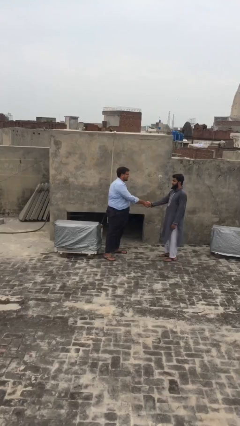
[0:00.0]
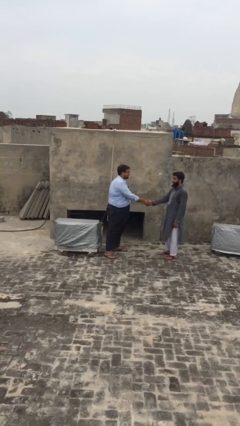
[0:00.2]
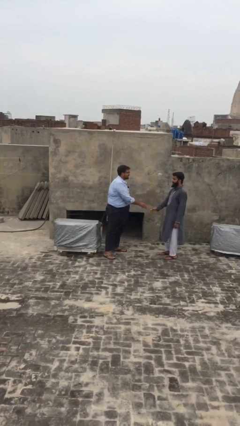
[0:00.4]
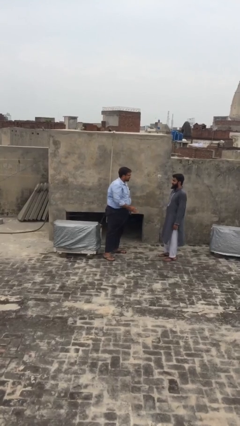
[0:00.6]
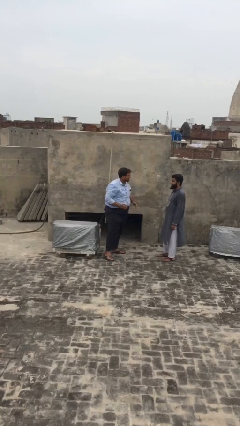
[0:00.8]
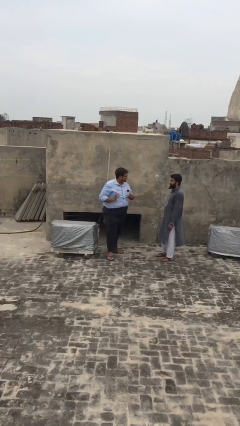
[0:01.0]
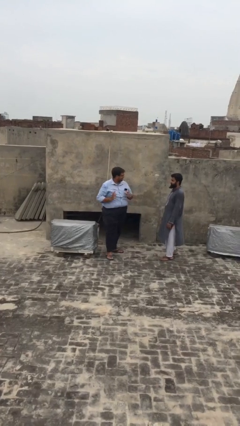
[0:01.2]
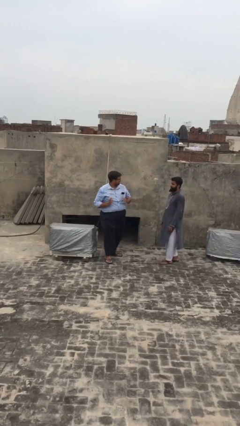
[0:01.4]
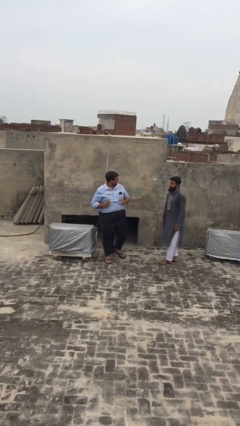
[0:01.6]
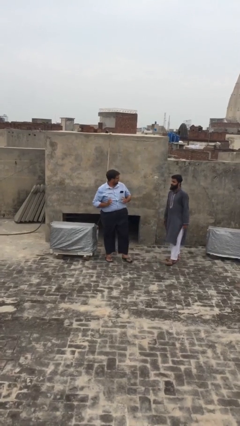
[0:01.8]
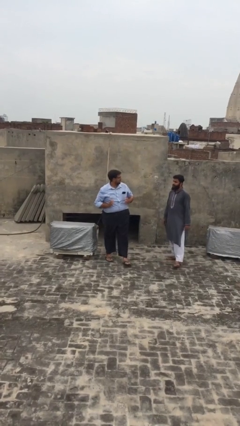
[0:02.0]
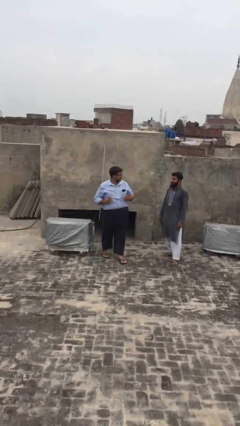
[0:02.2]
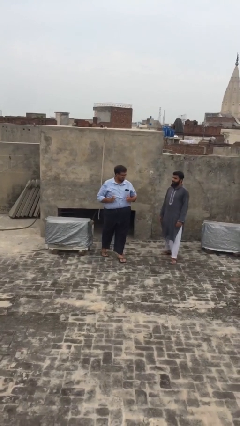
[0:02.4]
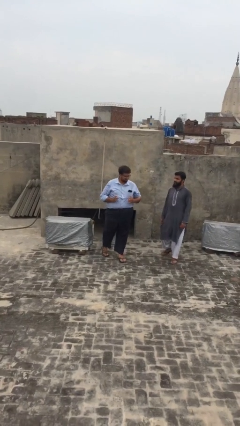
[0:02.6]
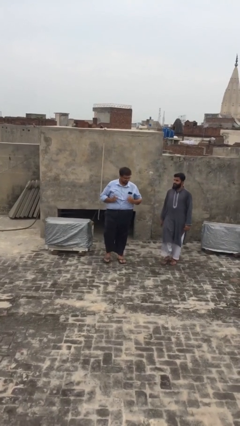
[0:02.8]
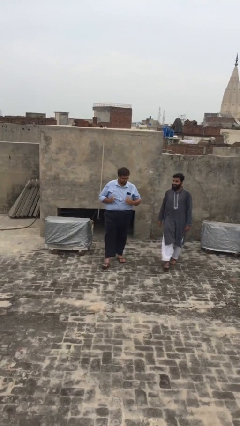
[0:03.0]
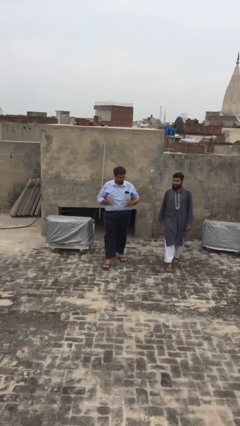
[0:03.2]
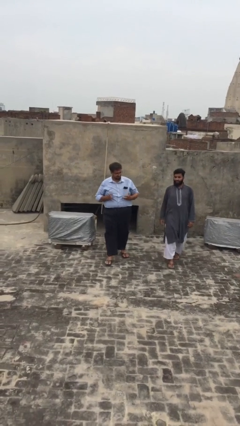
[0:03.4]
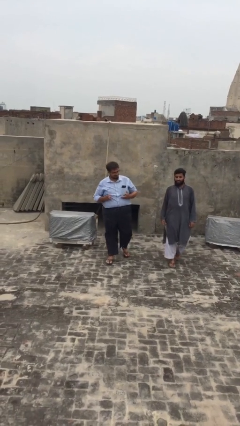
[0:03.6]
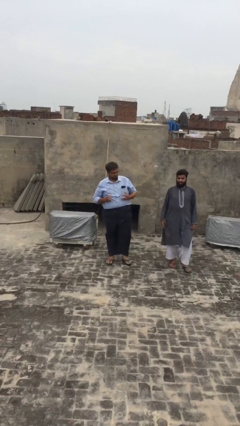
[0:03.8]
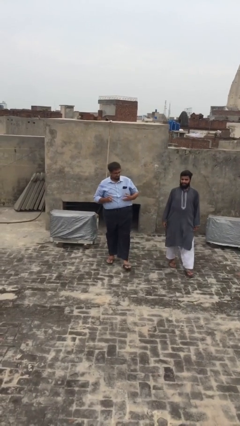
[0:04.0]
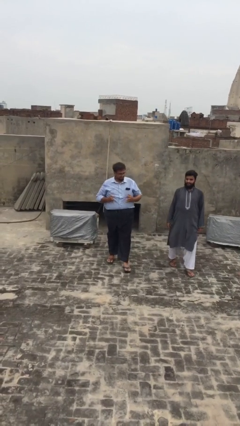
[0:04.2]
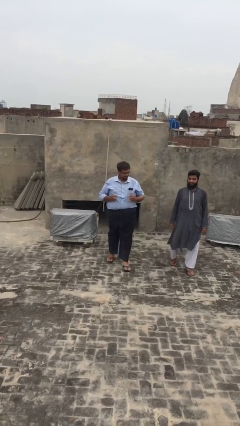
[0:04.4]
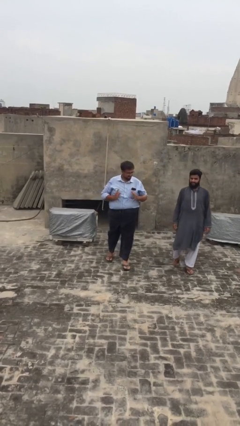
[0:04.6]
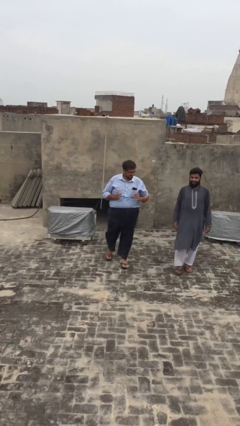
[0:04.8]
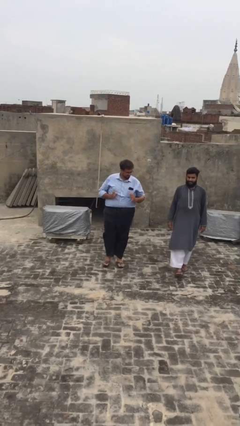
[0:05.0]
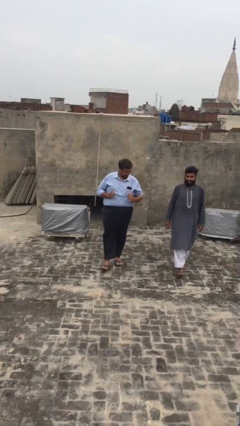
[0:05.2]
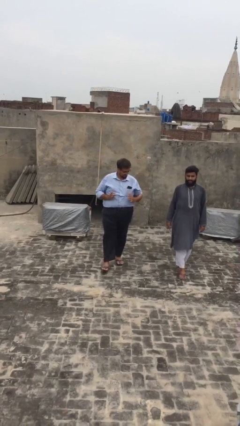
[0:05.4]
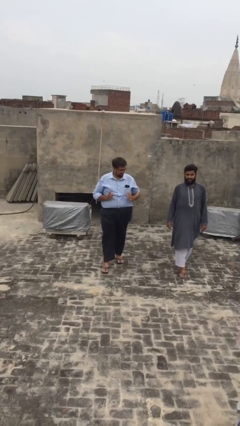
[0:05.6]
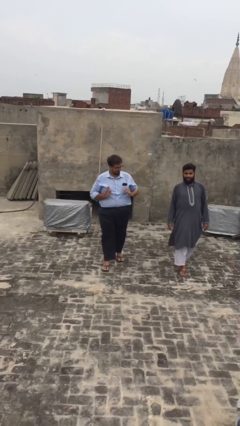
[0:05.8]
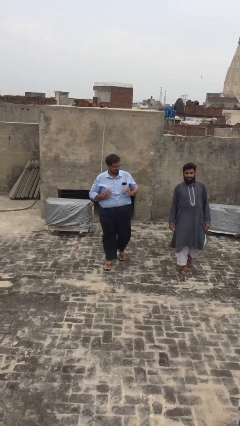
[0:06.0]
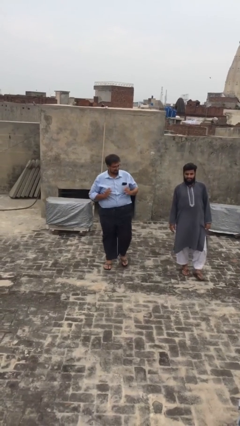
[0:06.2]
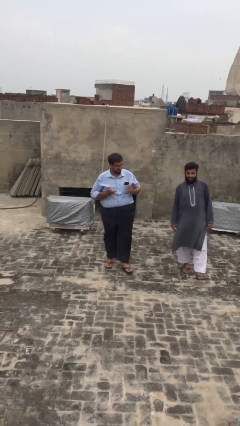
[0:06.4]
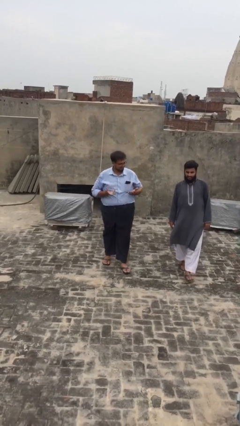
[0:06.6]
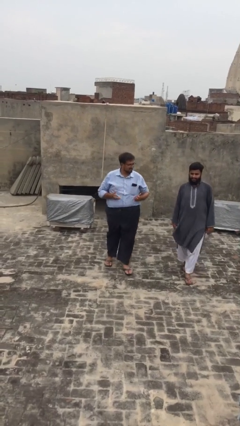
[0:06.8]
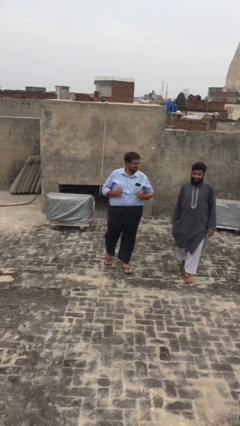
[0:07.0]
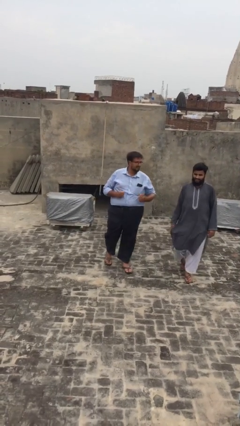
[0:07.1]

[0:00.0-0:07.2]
person talks to person

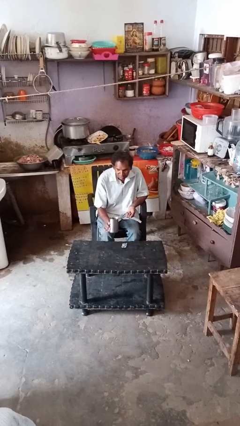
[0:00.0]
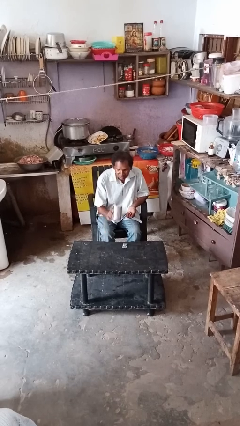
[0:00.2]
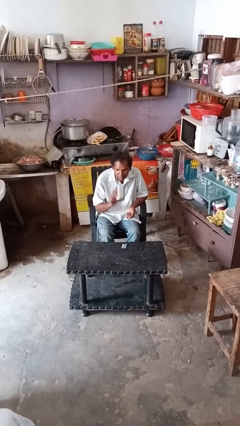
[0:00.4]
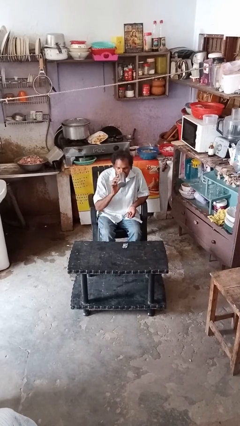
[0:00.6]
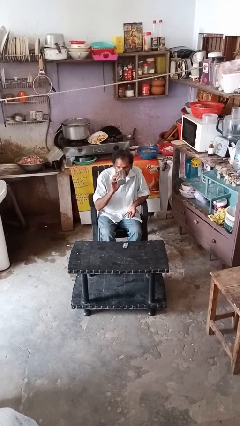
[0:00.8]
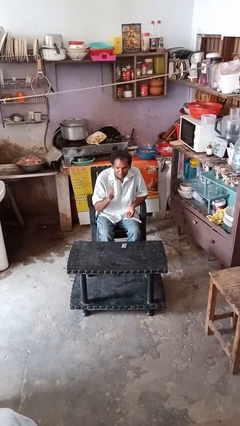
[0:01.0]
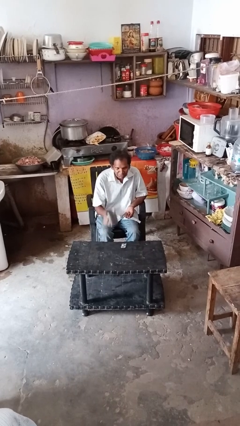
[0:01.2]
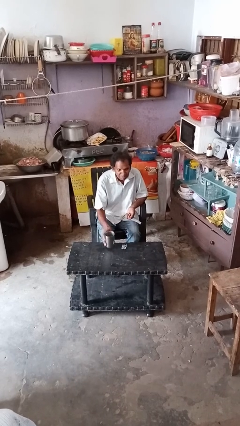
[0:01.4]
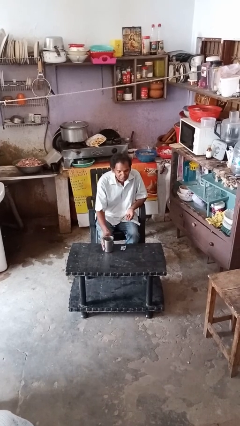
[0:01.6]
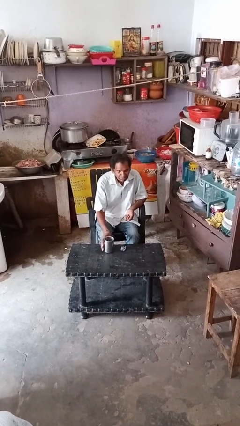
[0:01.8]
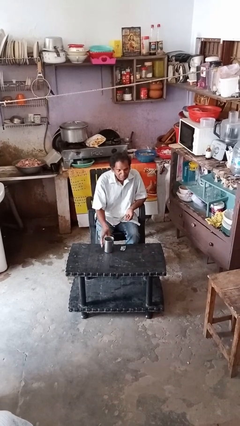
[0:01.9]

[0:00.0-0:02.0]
person drinks from cup

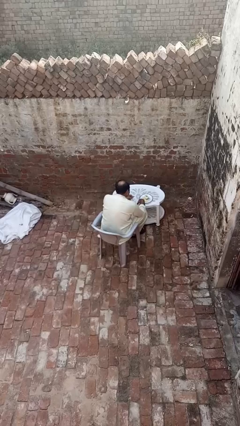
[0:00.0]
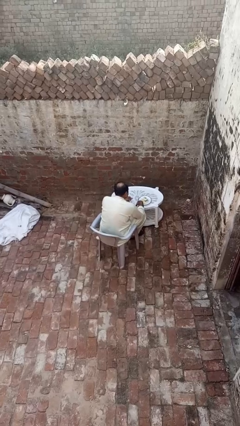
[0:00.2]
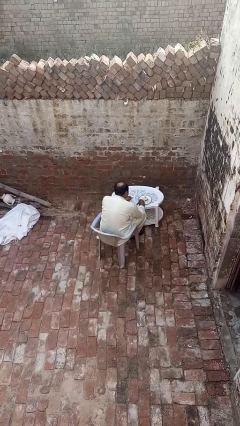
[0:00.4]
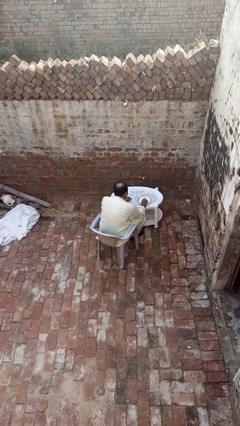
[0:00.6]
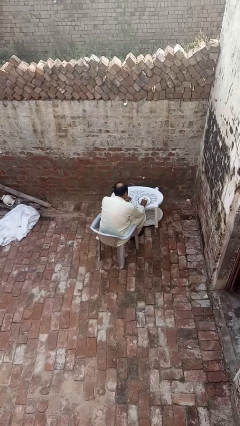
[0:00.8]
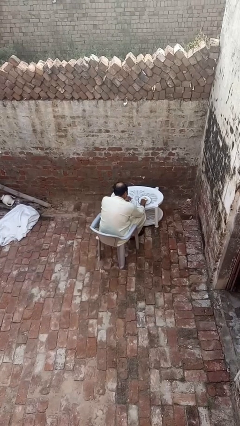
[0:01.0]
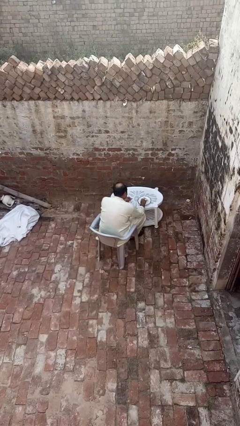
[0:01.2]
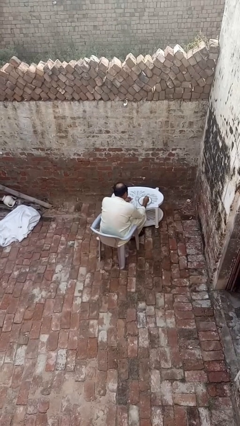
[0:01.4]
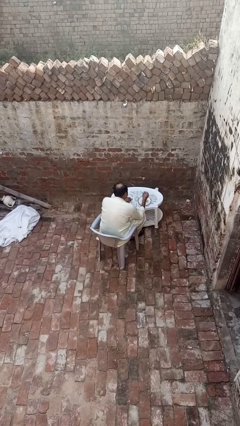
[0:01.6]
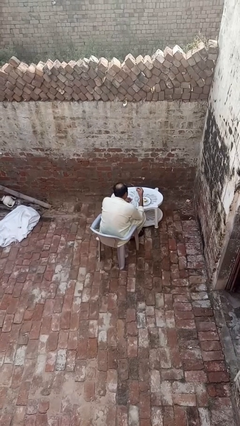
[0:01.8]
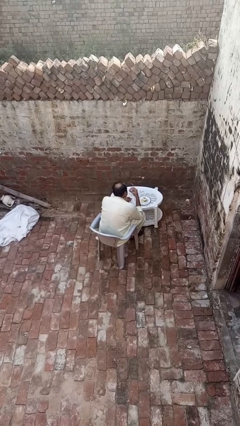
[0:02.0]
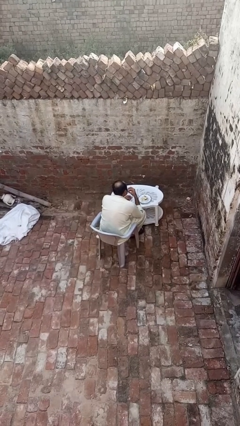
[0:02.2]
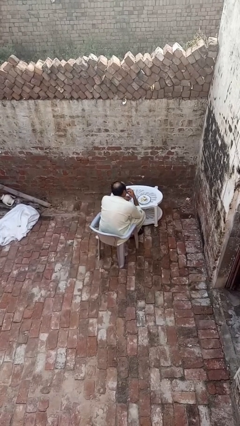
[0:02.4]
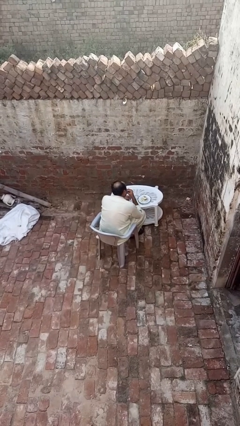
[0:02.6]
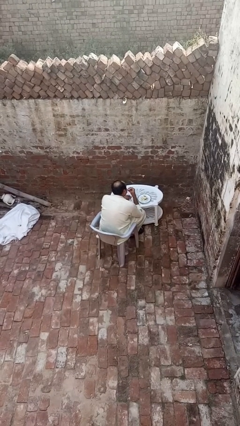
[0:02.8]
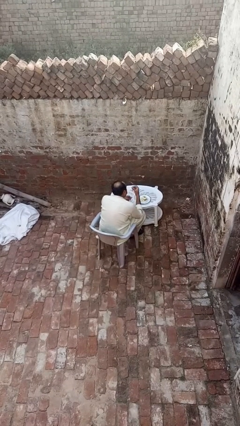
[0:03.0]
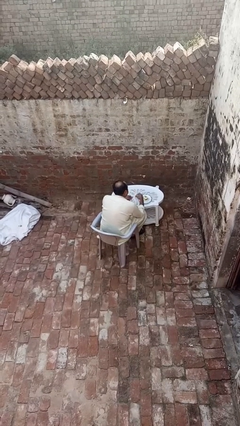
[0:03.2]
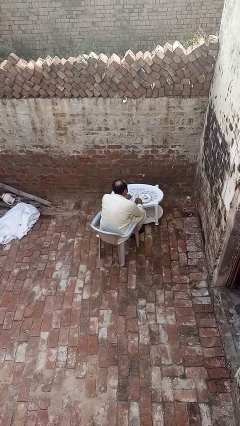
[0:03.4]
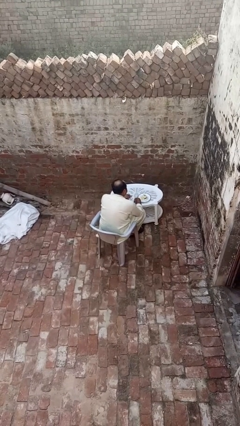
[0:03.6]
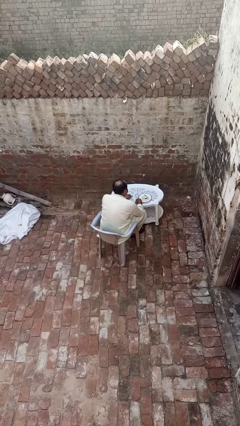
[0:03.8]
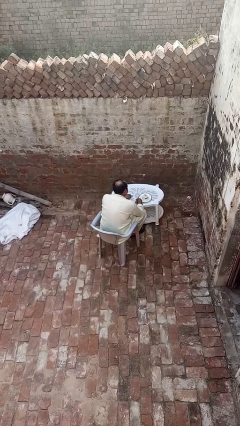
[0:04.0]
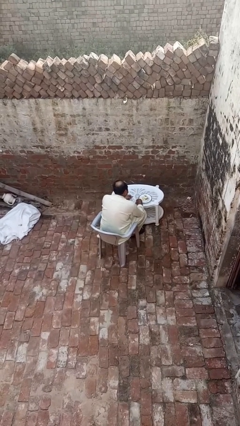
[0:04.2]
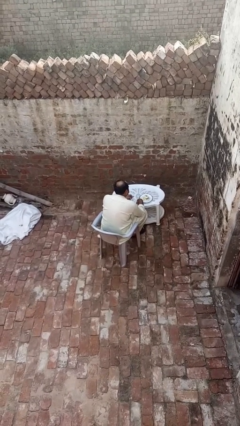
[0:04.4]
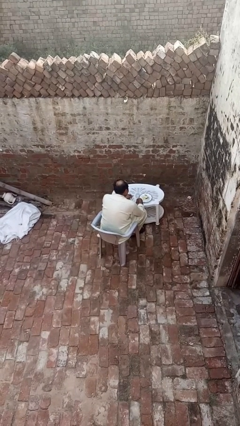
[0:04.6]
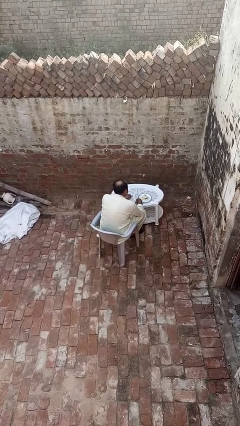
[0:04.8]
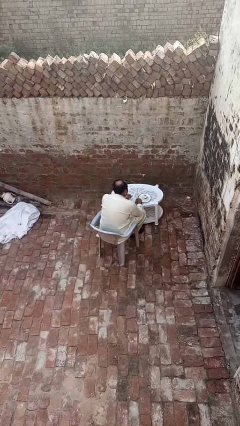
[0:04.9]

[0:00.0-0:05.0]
person eats with hands

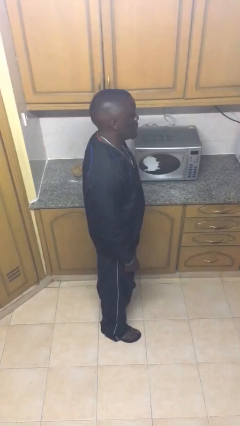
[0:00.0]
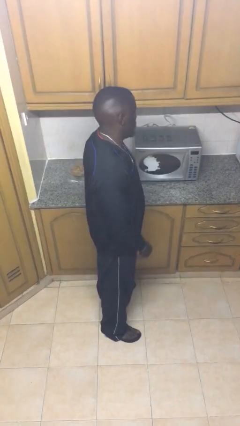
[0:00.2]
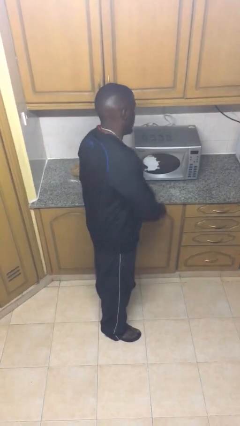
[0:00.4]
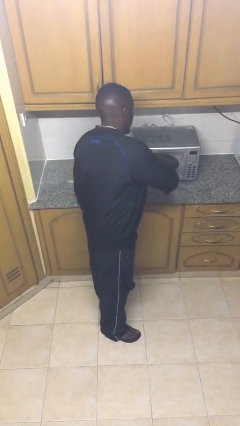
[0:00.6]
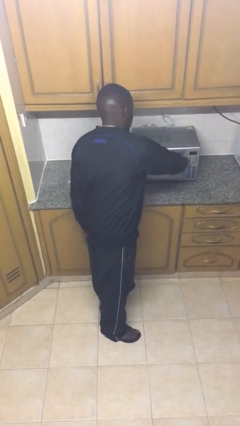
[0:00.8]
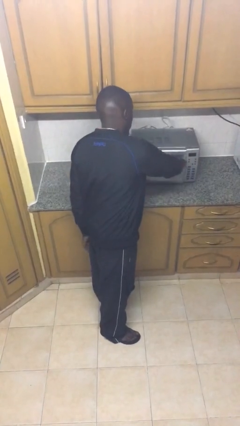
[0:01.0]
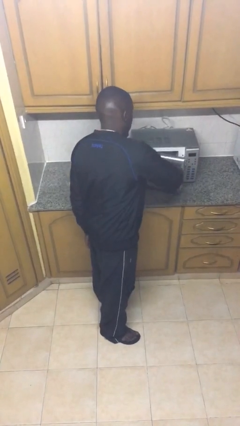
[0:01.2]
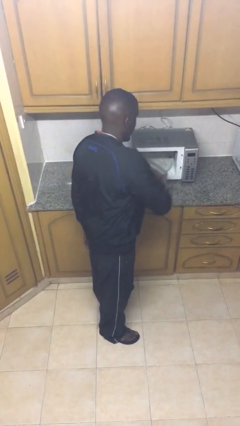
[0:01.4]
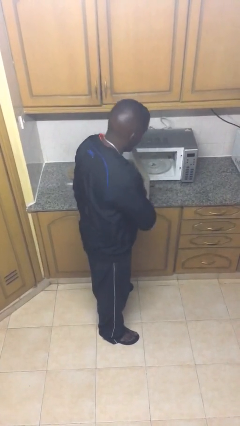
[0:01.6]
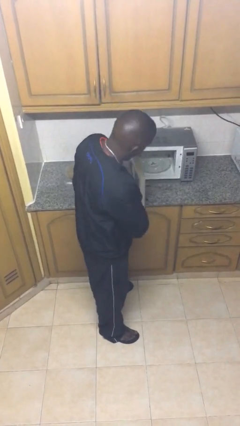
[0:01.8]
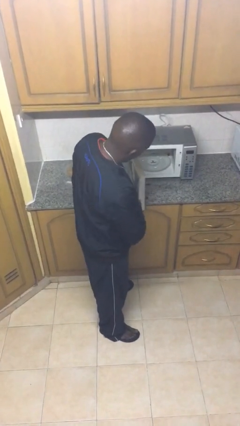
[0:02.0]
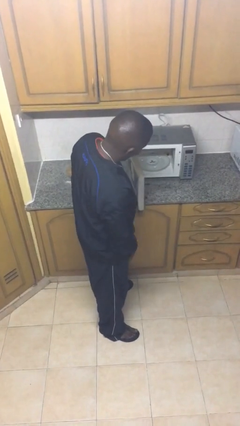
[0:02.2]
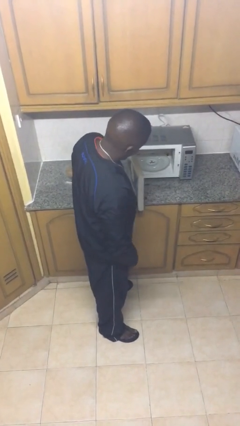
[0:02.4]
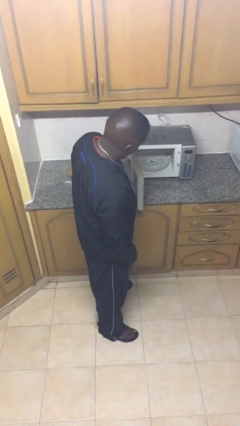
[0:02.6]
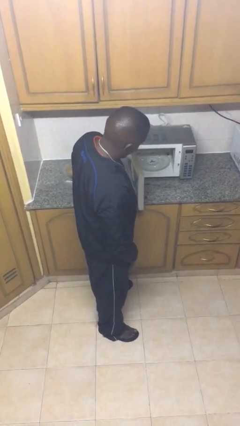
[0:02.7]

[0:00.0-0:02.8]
person opens microwave

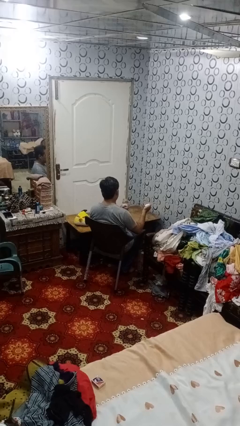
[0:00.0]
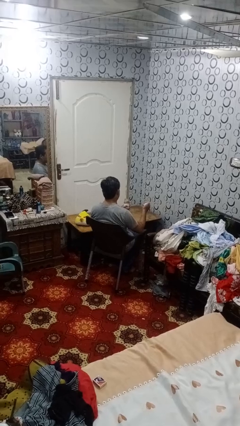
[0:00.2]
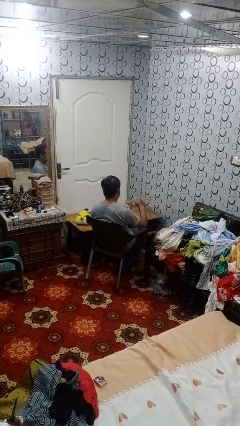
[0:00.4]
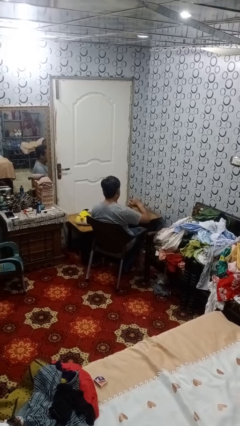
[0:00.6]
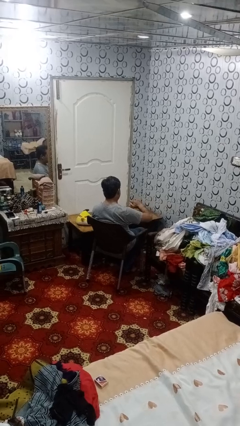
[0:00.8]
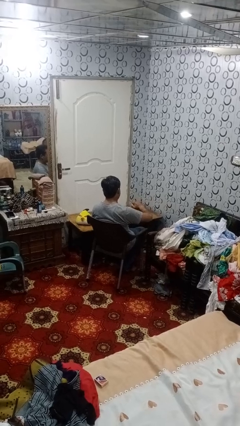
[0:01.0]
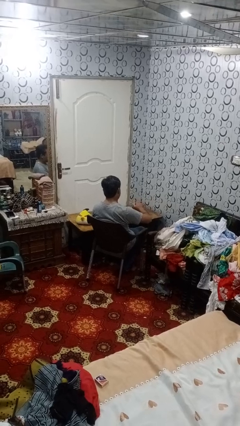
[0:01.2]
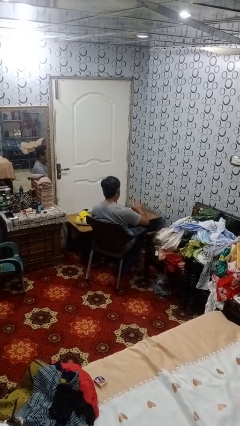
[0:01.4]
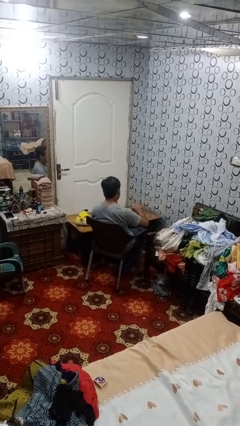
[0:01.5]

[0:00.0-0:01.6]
person closes jar
